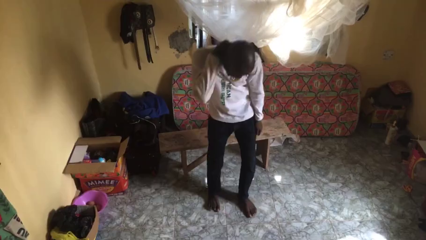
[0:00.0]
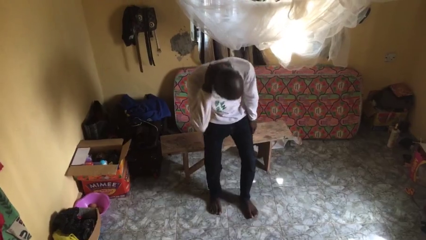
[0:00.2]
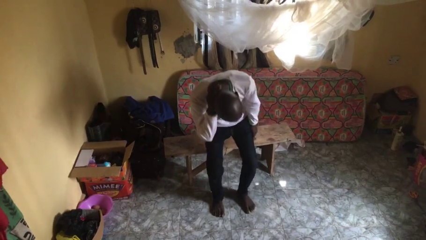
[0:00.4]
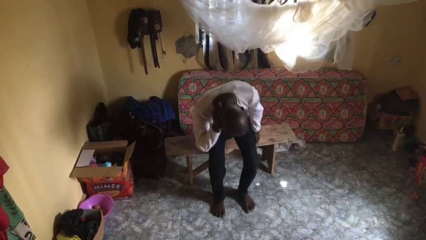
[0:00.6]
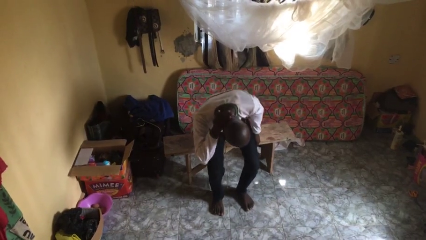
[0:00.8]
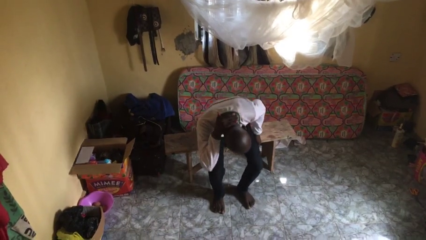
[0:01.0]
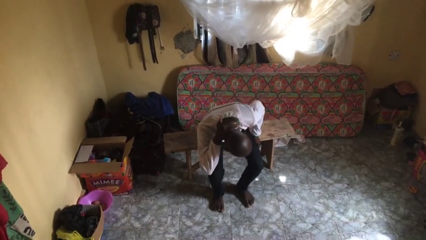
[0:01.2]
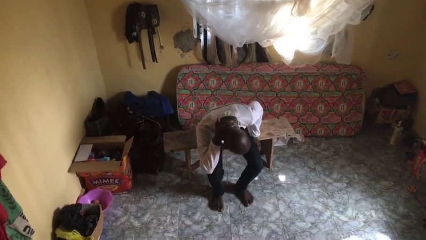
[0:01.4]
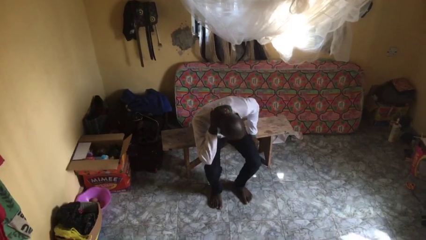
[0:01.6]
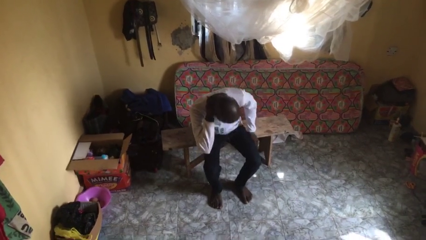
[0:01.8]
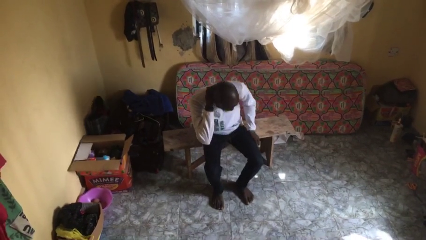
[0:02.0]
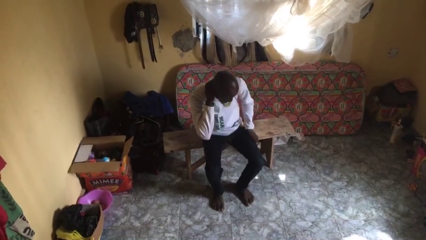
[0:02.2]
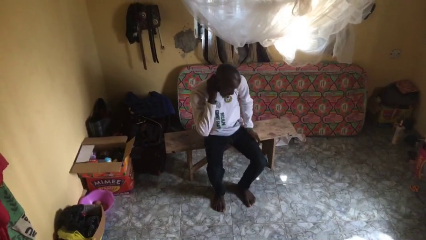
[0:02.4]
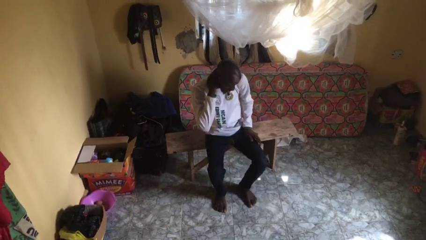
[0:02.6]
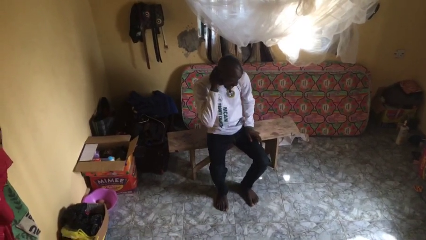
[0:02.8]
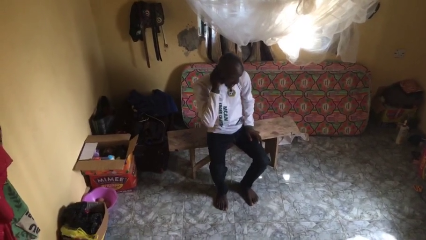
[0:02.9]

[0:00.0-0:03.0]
person rubs neck

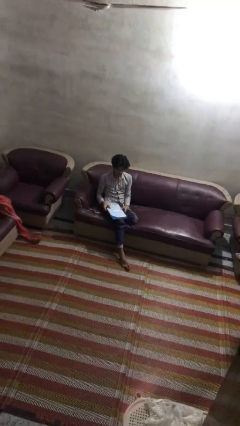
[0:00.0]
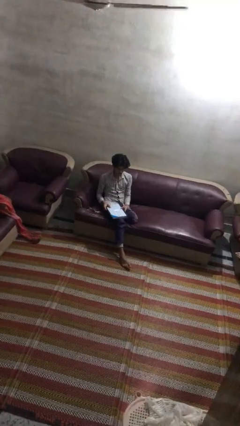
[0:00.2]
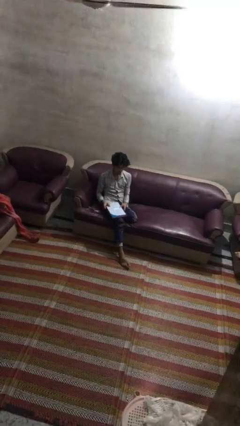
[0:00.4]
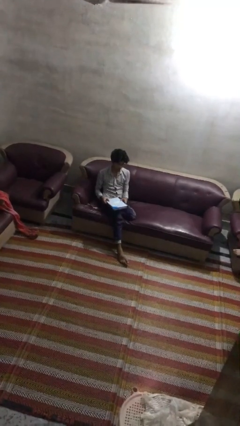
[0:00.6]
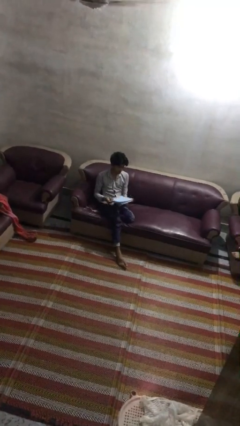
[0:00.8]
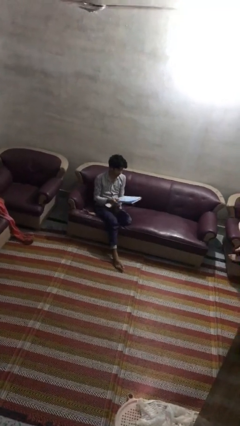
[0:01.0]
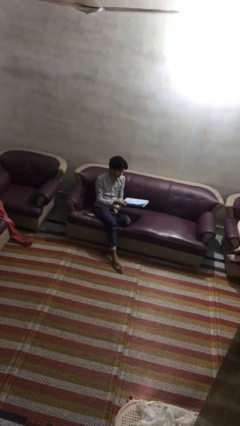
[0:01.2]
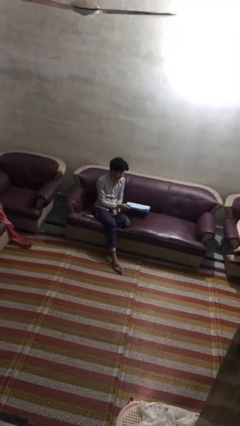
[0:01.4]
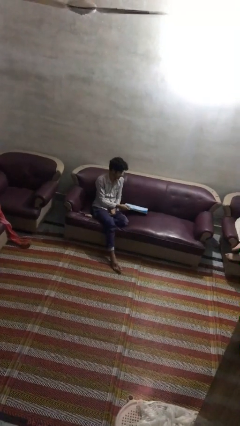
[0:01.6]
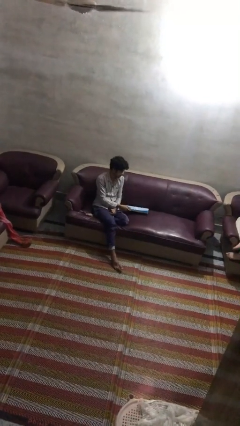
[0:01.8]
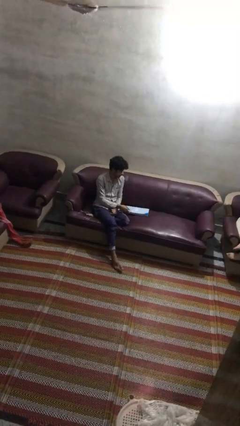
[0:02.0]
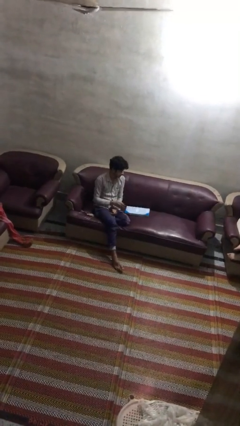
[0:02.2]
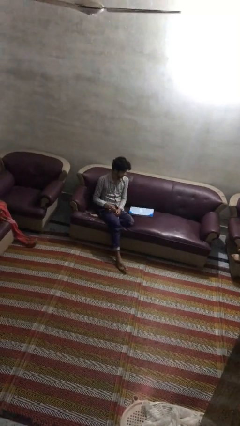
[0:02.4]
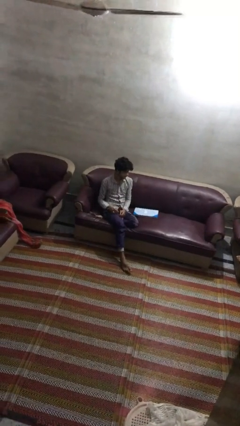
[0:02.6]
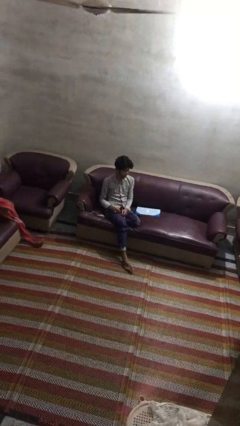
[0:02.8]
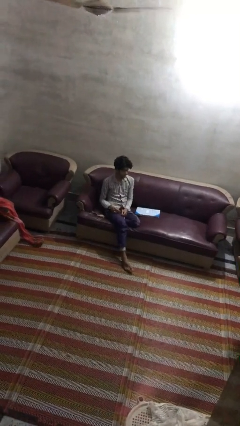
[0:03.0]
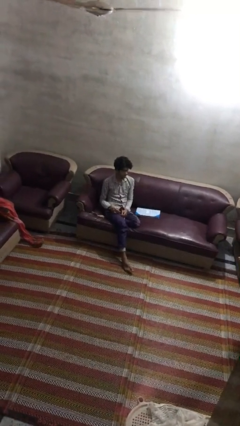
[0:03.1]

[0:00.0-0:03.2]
person puts down object on couch

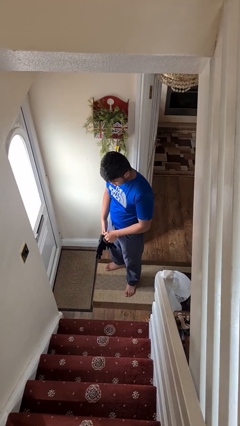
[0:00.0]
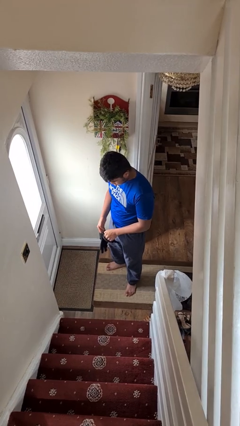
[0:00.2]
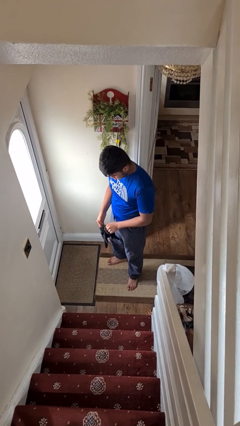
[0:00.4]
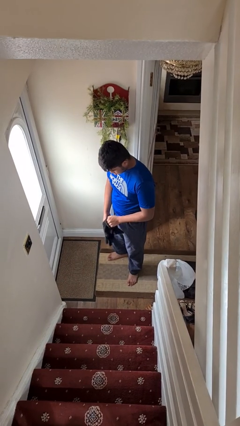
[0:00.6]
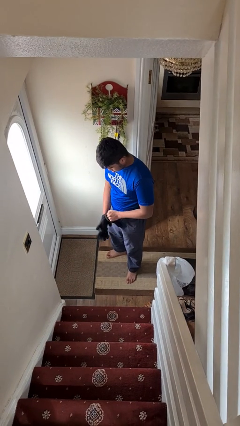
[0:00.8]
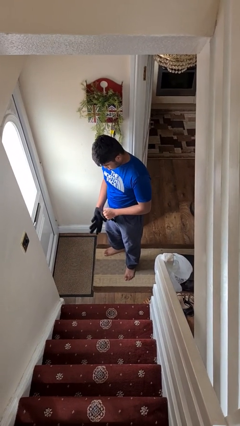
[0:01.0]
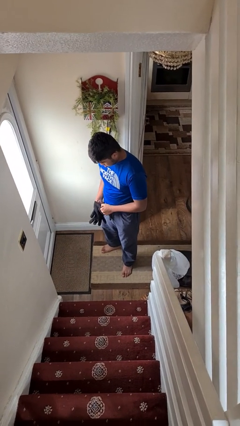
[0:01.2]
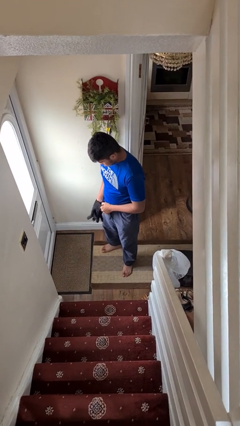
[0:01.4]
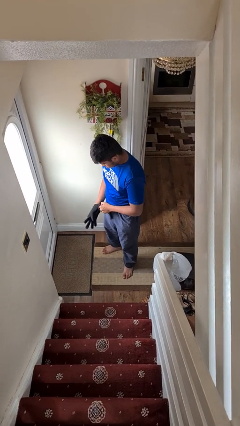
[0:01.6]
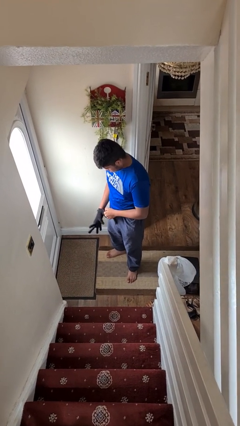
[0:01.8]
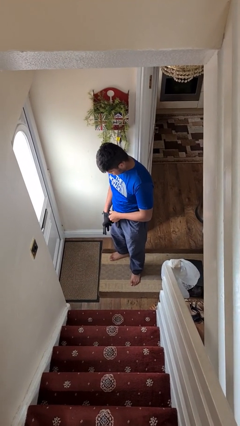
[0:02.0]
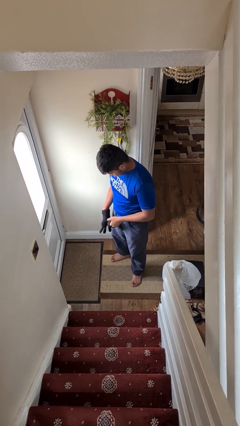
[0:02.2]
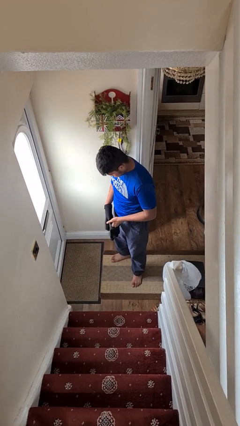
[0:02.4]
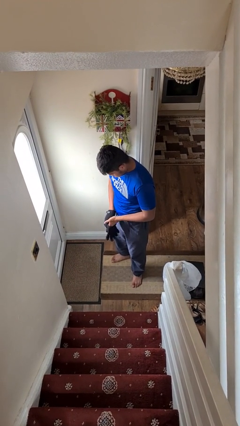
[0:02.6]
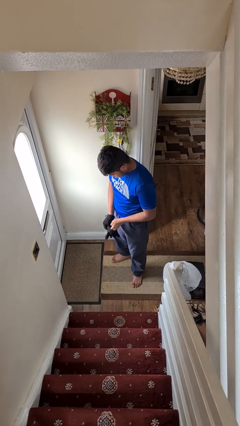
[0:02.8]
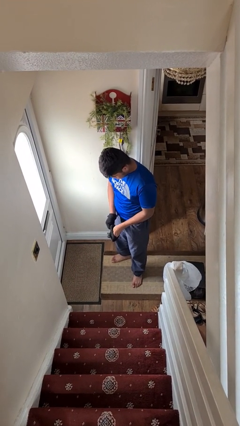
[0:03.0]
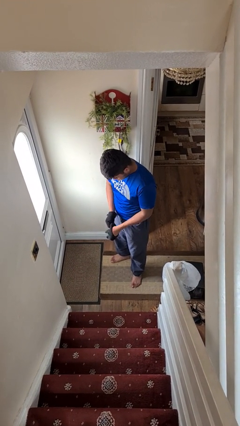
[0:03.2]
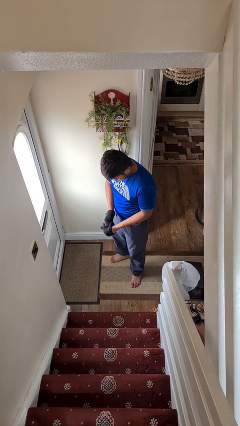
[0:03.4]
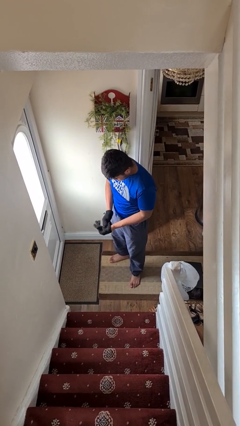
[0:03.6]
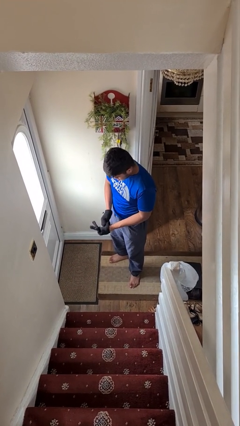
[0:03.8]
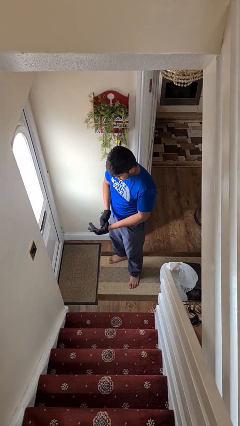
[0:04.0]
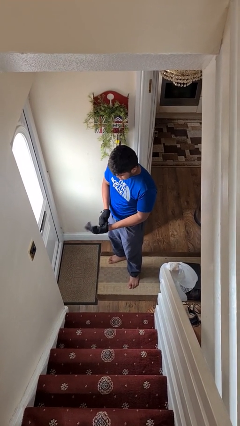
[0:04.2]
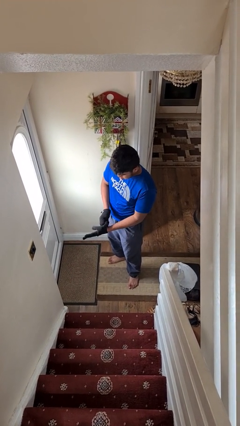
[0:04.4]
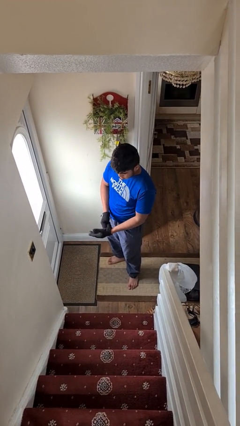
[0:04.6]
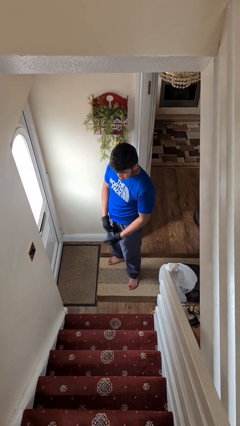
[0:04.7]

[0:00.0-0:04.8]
person puts on gloves

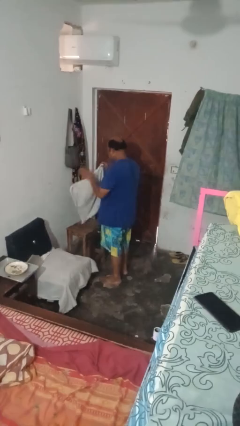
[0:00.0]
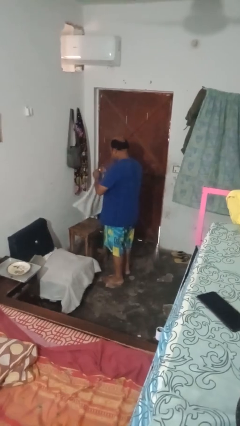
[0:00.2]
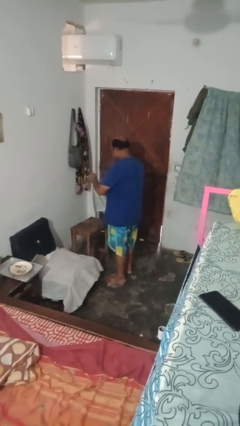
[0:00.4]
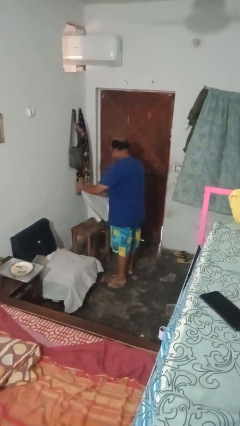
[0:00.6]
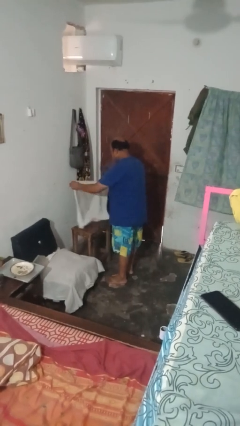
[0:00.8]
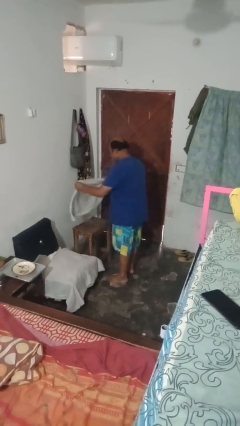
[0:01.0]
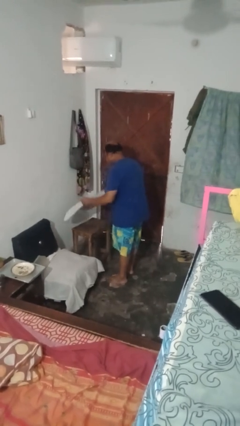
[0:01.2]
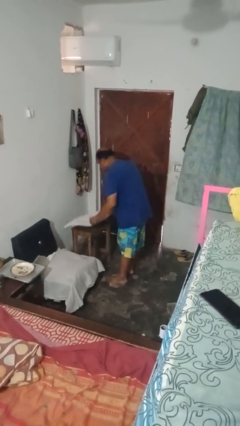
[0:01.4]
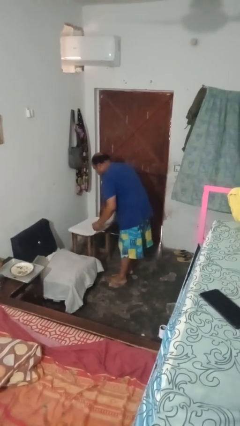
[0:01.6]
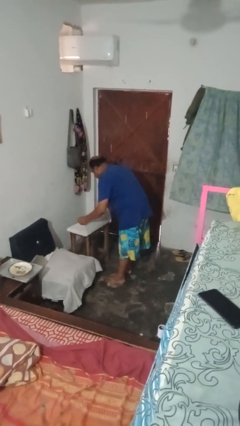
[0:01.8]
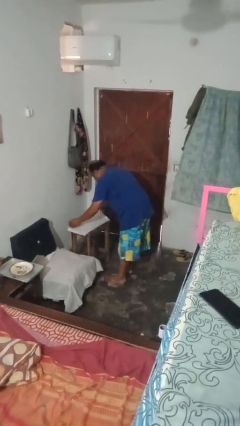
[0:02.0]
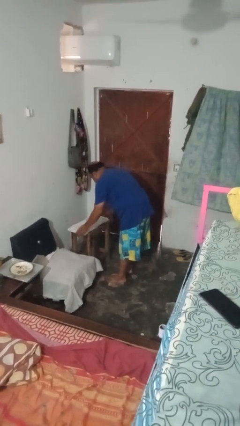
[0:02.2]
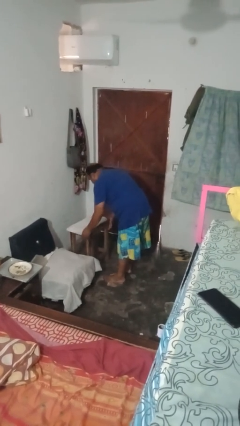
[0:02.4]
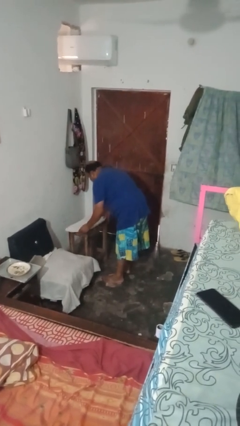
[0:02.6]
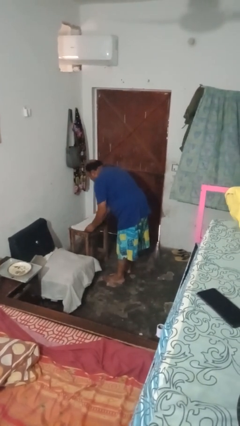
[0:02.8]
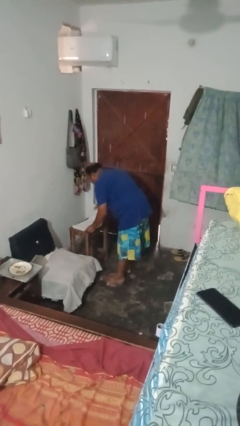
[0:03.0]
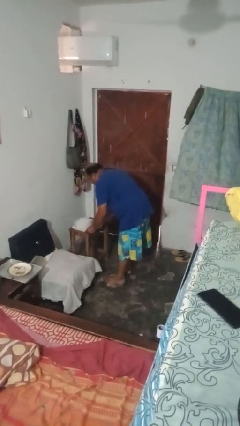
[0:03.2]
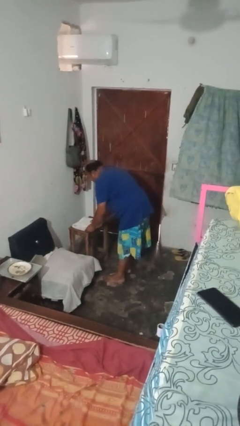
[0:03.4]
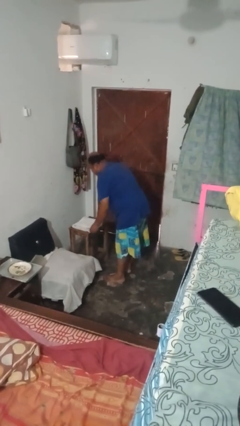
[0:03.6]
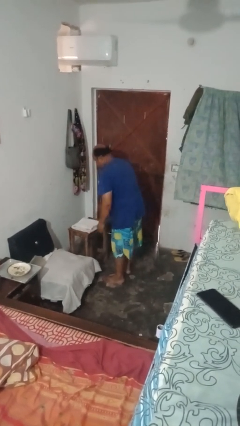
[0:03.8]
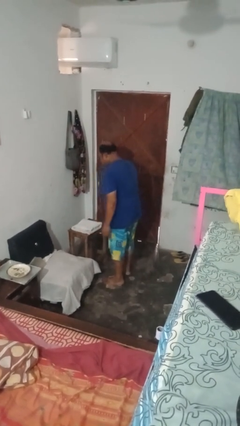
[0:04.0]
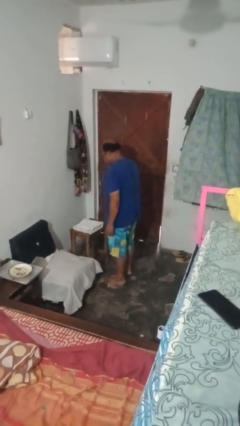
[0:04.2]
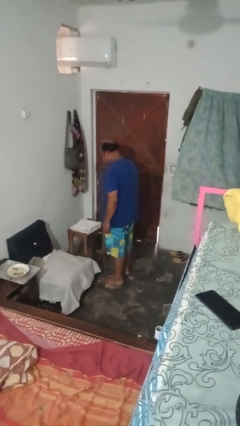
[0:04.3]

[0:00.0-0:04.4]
person folds towel

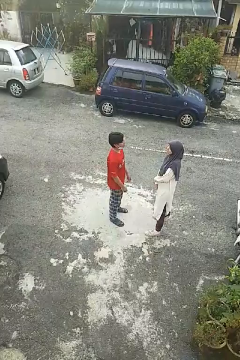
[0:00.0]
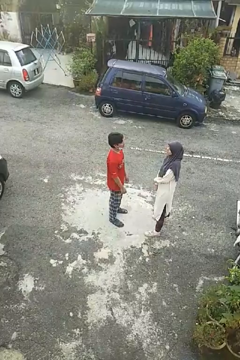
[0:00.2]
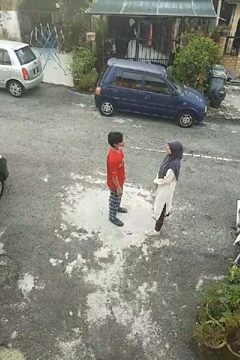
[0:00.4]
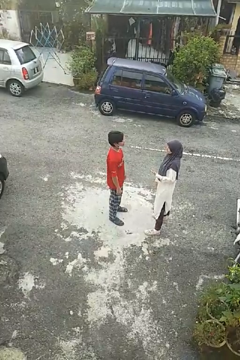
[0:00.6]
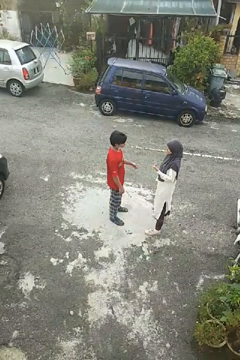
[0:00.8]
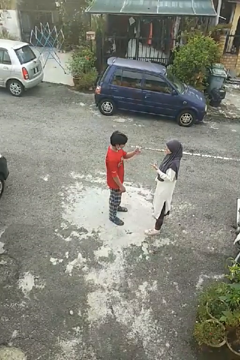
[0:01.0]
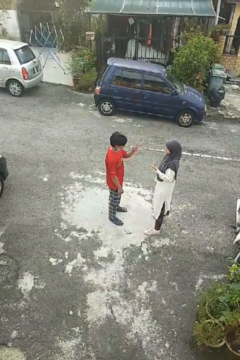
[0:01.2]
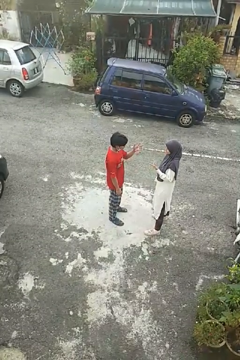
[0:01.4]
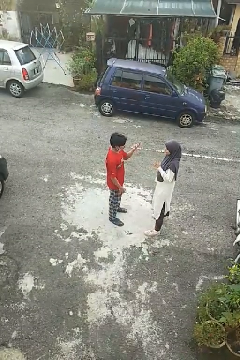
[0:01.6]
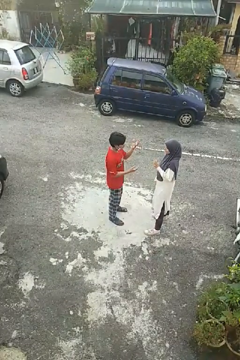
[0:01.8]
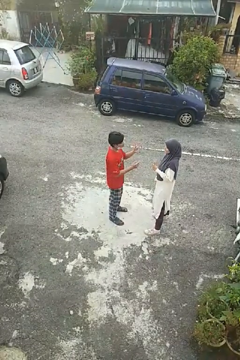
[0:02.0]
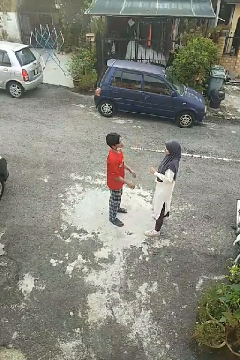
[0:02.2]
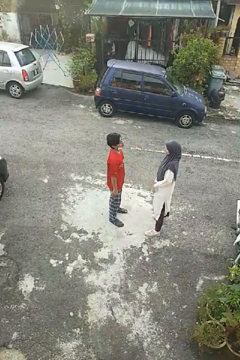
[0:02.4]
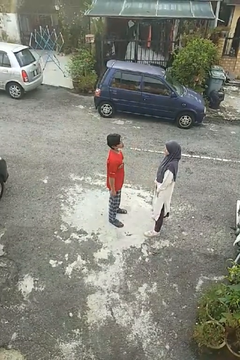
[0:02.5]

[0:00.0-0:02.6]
person talks to person
